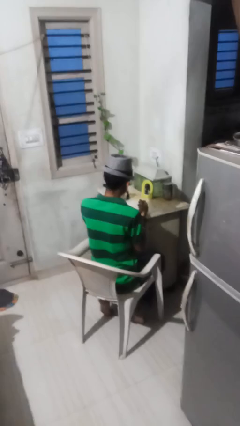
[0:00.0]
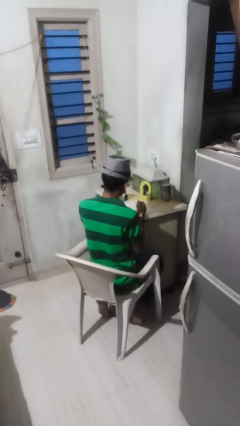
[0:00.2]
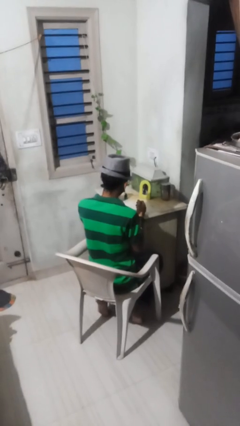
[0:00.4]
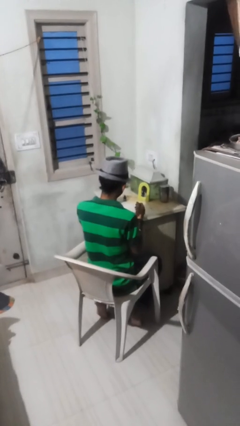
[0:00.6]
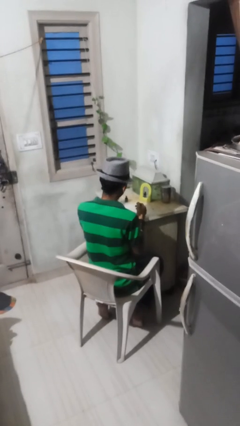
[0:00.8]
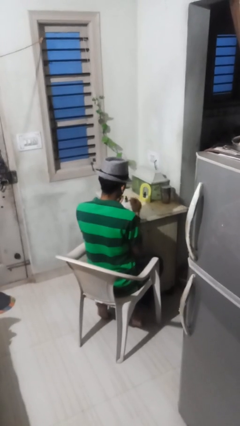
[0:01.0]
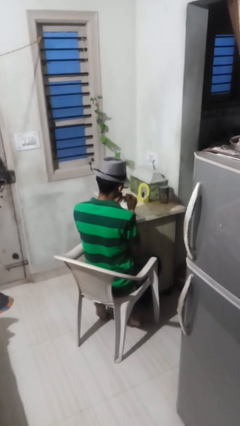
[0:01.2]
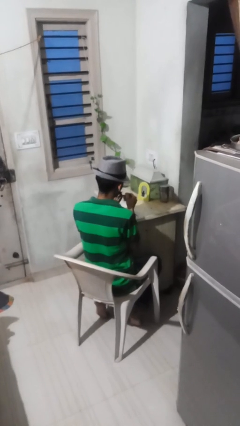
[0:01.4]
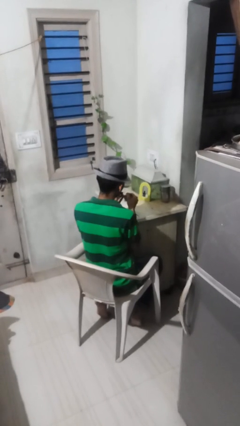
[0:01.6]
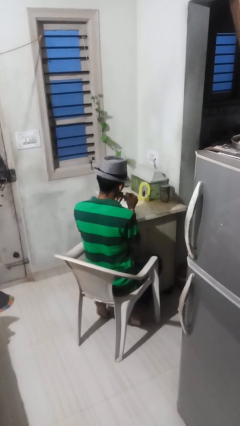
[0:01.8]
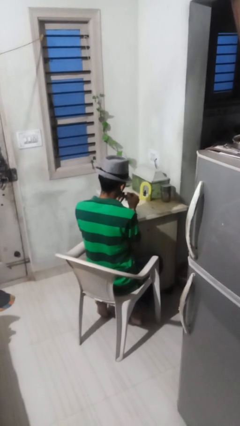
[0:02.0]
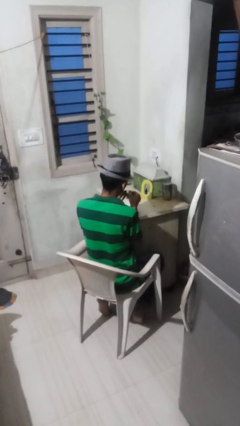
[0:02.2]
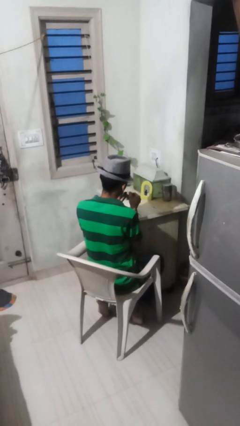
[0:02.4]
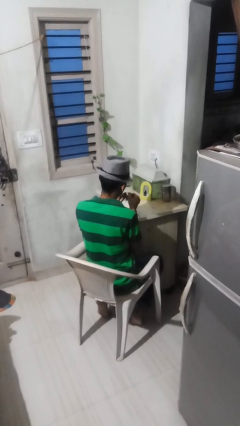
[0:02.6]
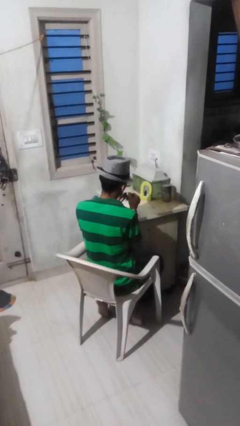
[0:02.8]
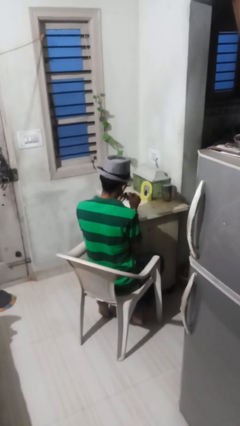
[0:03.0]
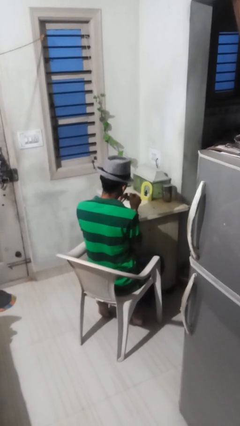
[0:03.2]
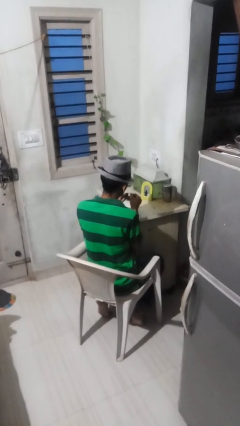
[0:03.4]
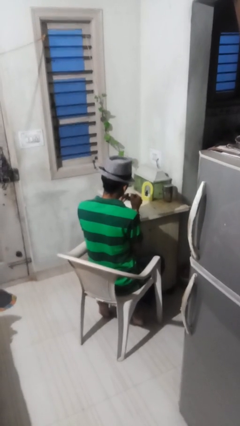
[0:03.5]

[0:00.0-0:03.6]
person paints fingernails

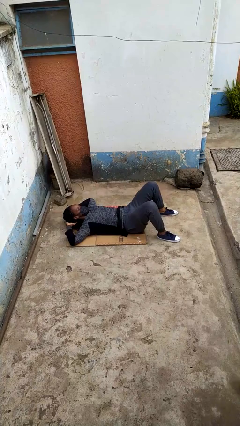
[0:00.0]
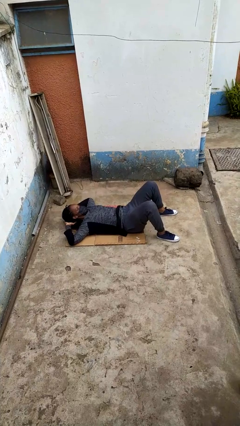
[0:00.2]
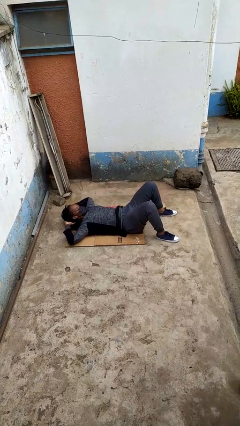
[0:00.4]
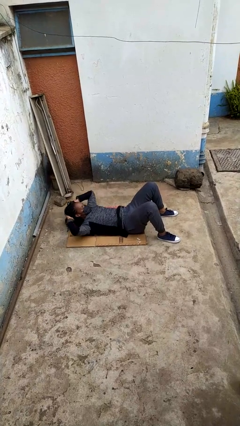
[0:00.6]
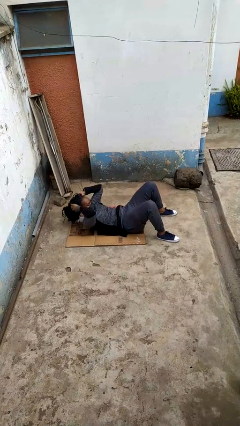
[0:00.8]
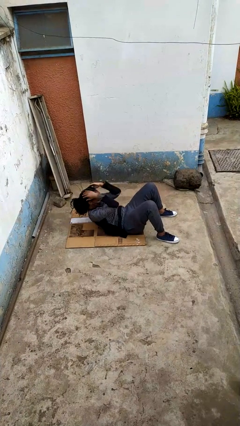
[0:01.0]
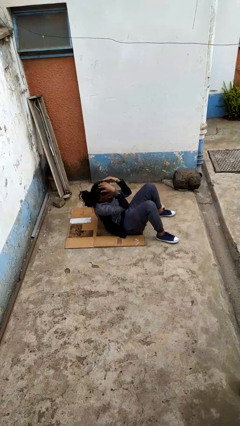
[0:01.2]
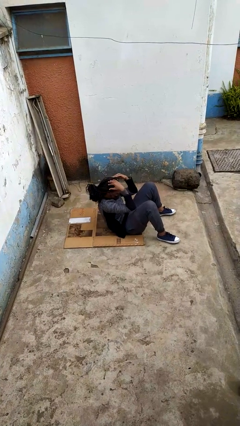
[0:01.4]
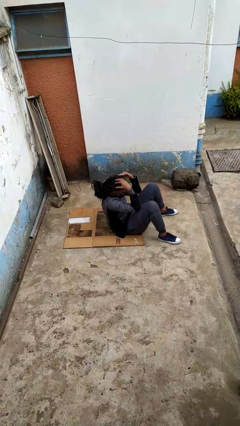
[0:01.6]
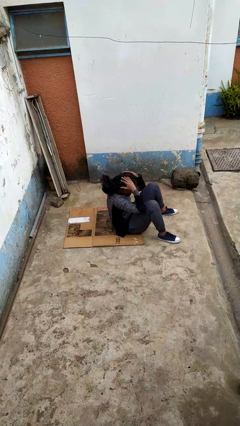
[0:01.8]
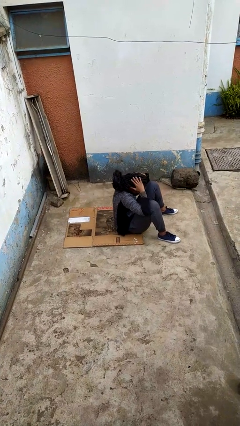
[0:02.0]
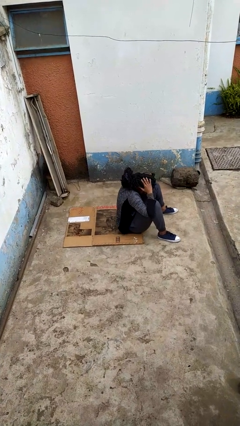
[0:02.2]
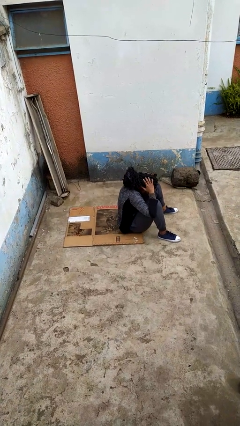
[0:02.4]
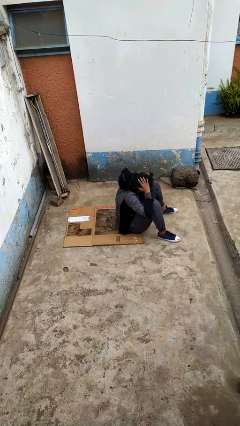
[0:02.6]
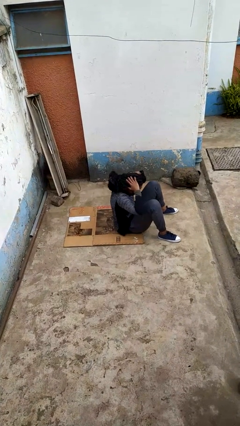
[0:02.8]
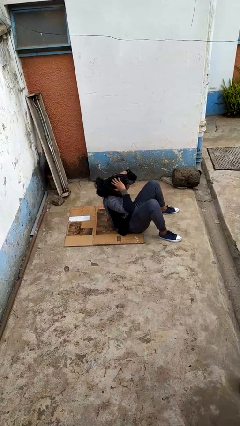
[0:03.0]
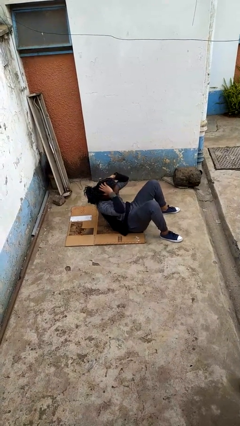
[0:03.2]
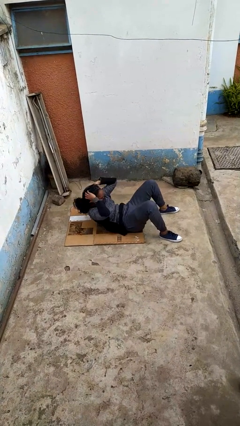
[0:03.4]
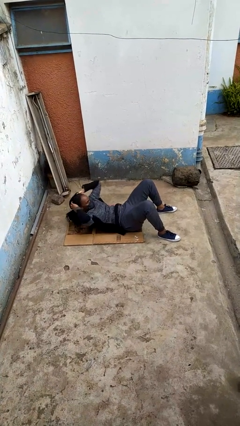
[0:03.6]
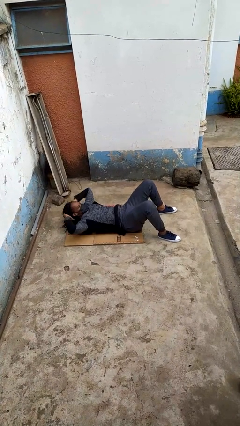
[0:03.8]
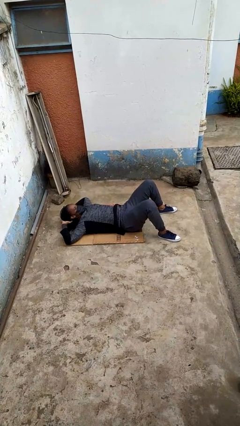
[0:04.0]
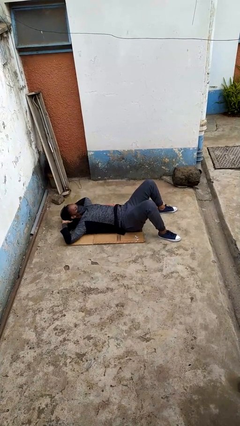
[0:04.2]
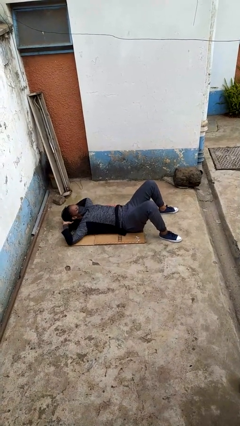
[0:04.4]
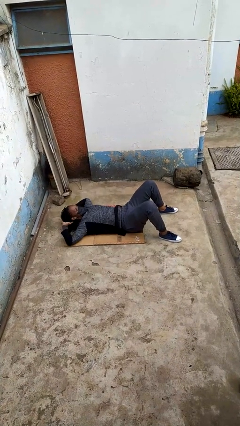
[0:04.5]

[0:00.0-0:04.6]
person exercises with situp

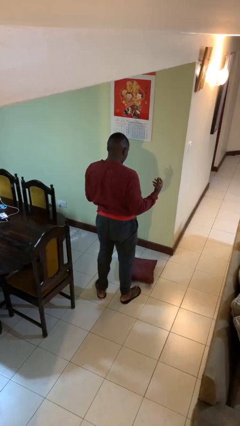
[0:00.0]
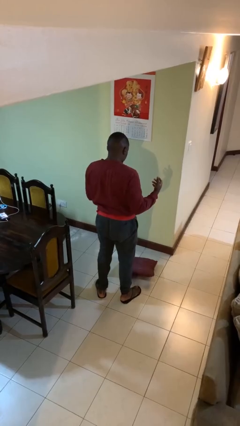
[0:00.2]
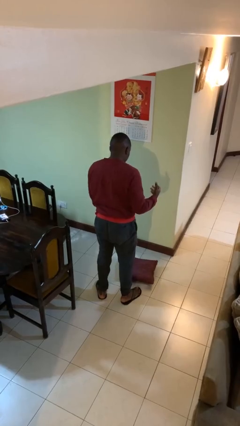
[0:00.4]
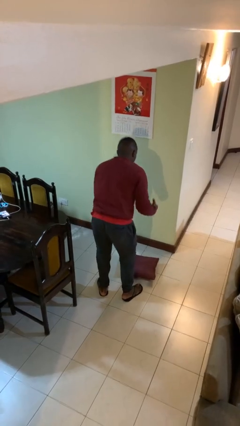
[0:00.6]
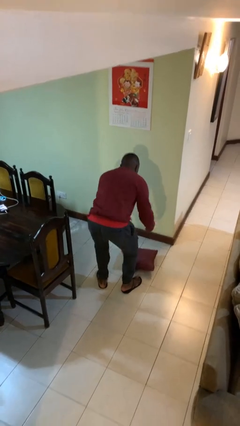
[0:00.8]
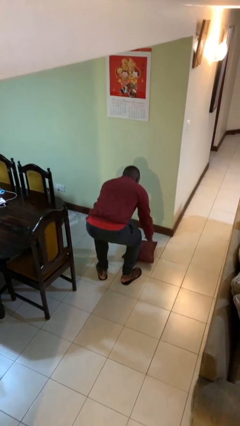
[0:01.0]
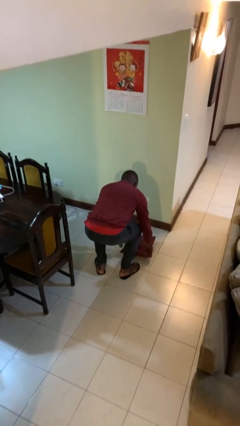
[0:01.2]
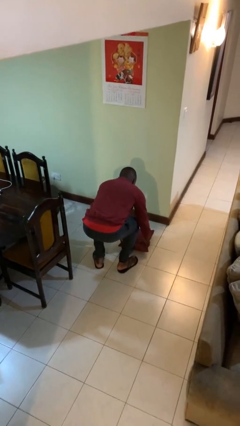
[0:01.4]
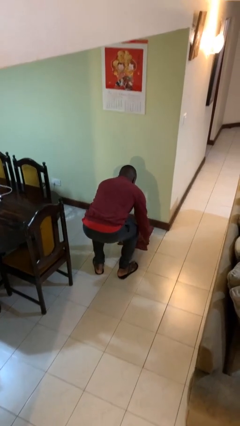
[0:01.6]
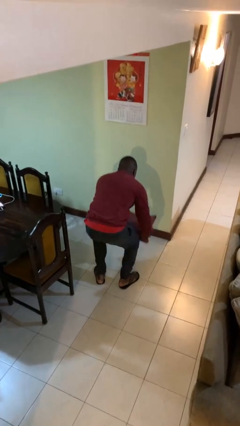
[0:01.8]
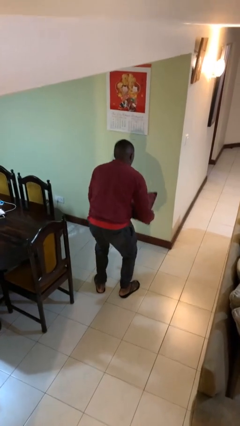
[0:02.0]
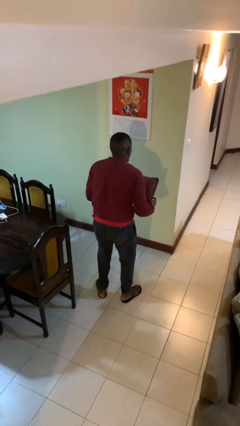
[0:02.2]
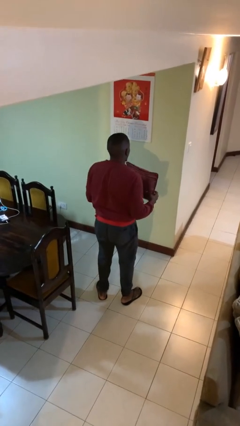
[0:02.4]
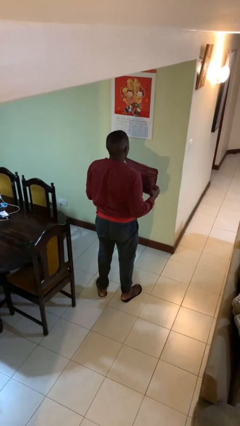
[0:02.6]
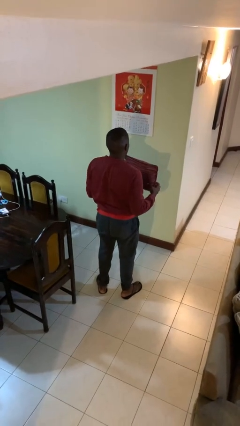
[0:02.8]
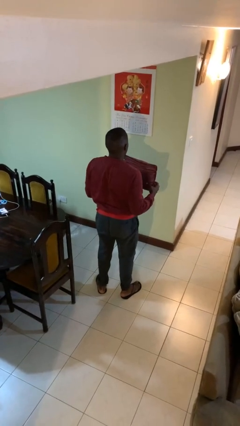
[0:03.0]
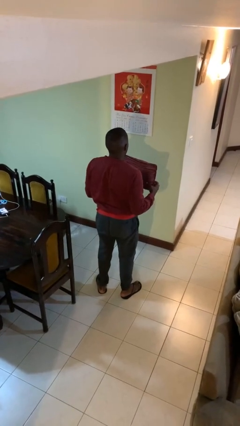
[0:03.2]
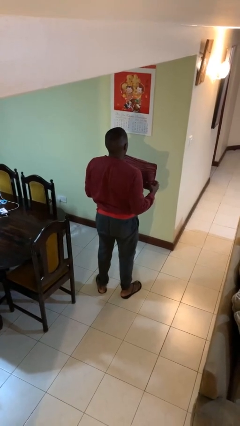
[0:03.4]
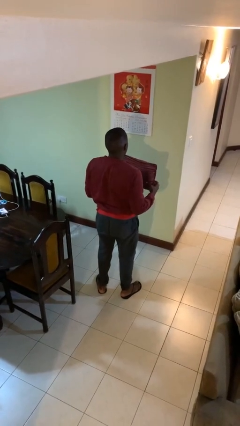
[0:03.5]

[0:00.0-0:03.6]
person picks up object from floor

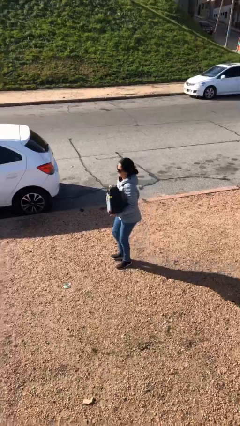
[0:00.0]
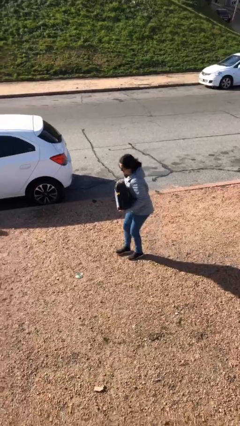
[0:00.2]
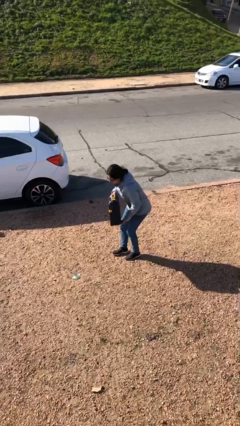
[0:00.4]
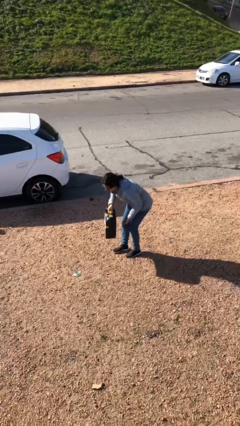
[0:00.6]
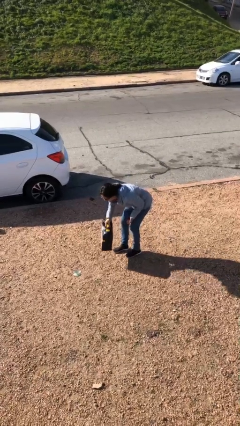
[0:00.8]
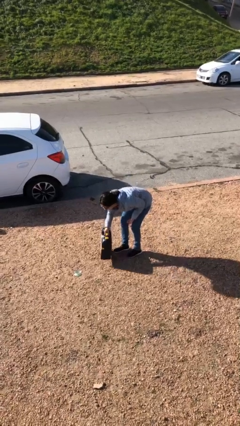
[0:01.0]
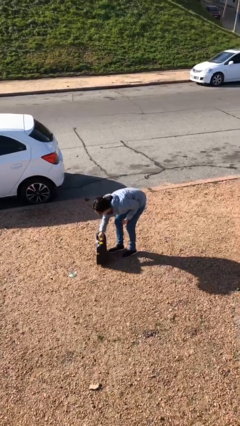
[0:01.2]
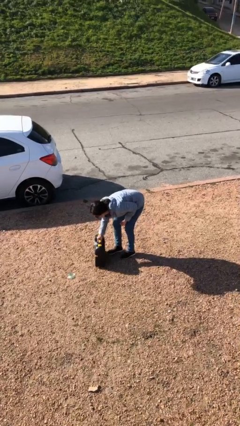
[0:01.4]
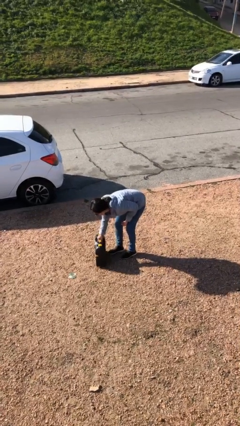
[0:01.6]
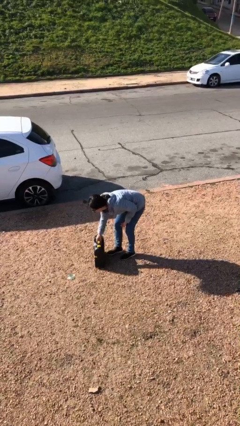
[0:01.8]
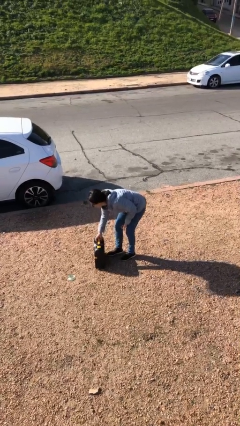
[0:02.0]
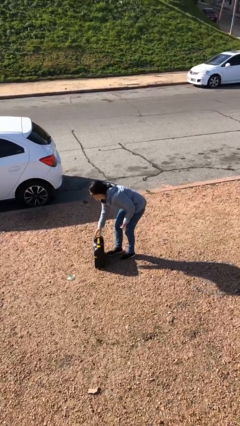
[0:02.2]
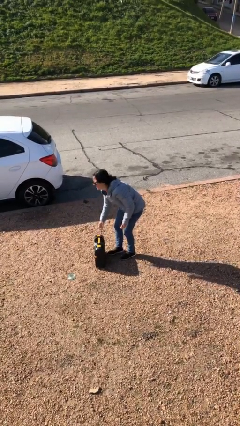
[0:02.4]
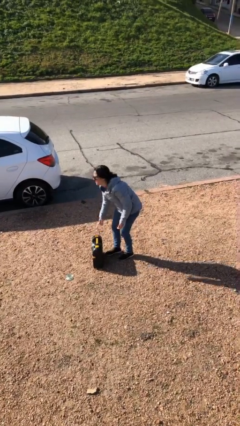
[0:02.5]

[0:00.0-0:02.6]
person puts down object on floor

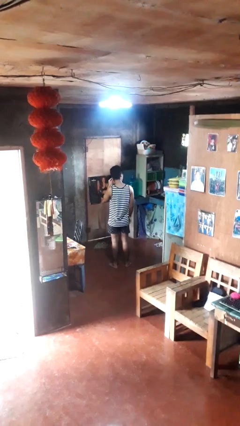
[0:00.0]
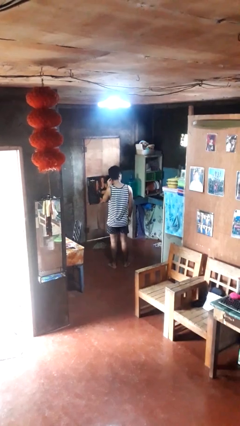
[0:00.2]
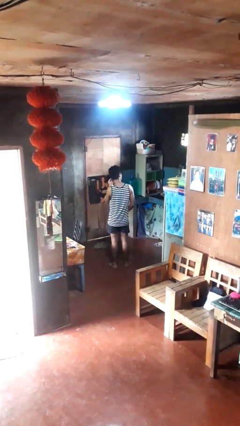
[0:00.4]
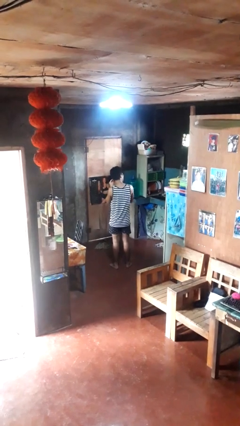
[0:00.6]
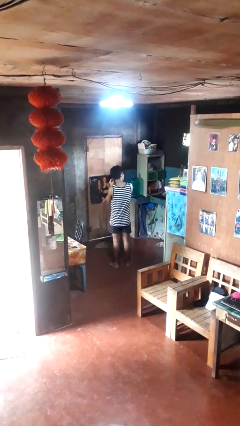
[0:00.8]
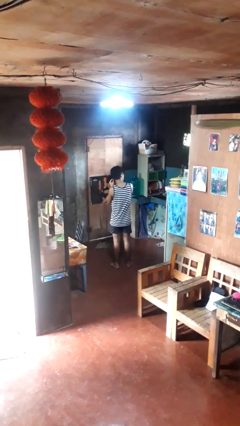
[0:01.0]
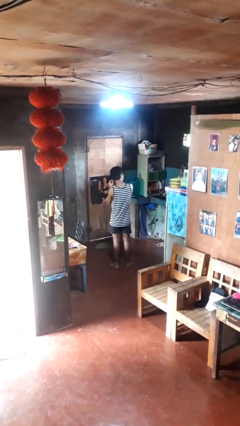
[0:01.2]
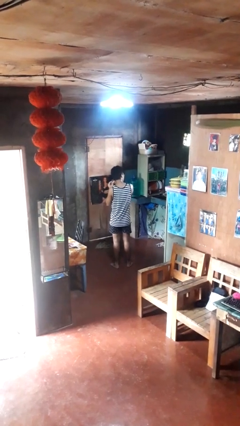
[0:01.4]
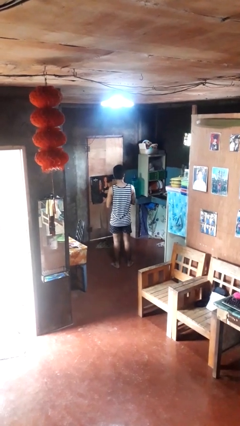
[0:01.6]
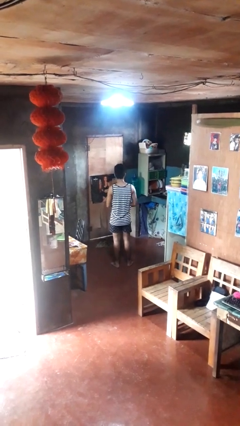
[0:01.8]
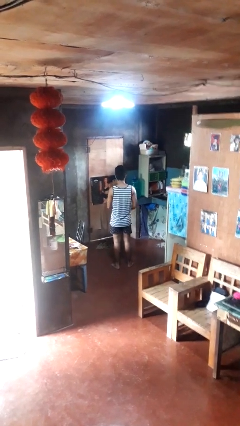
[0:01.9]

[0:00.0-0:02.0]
person takes off earrings

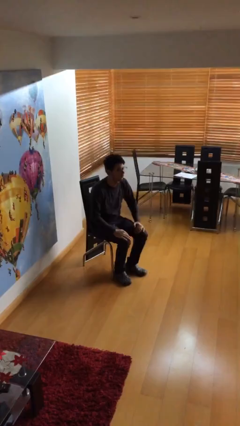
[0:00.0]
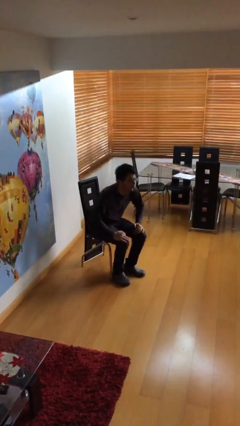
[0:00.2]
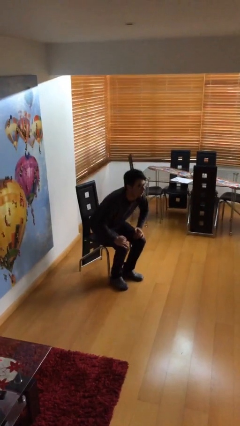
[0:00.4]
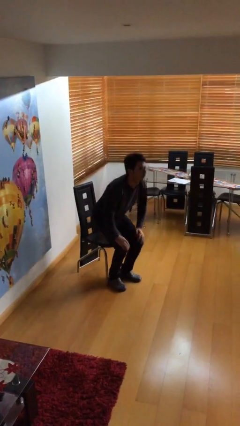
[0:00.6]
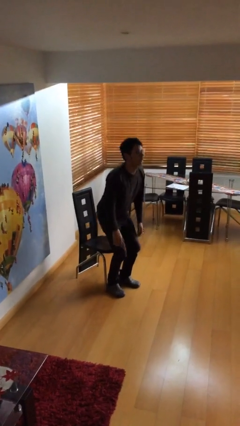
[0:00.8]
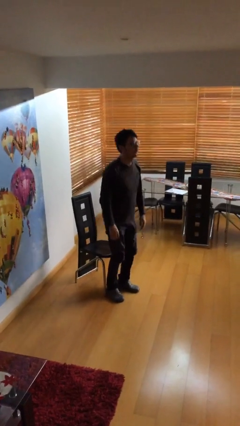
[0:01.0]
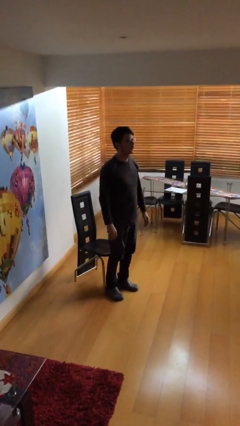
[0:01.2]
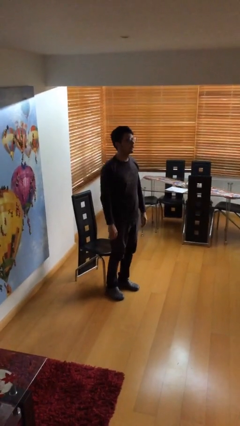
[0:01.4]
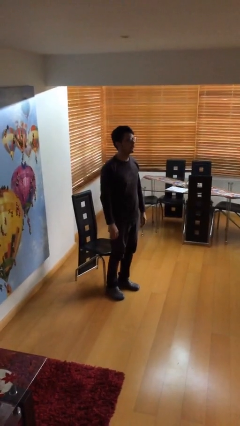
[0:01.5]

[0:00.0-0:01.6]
person stands up
